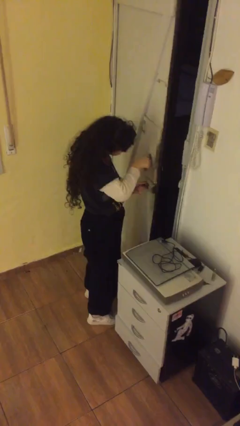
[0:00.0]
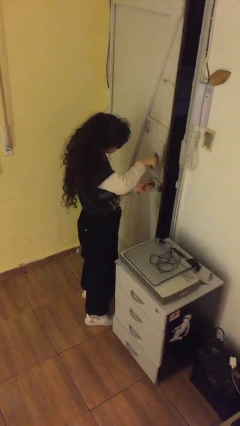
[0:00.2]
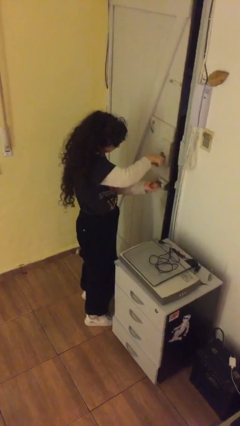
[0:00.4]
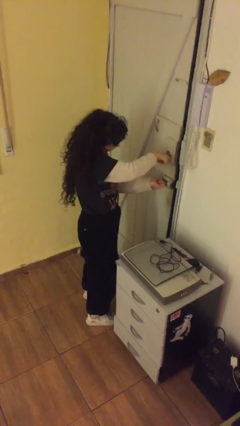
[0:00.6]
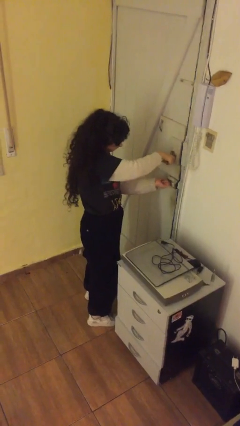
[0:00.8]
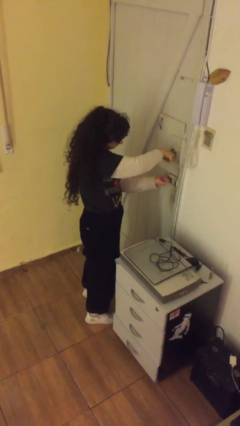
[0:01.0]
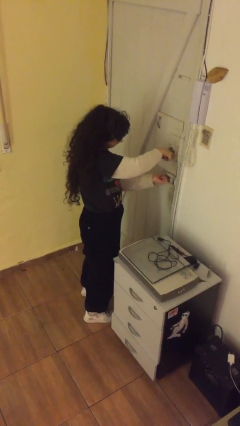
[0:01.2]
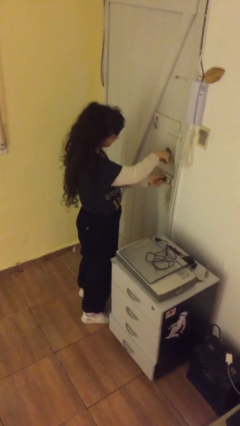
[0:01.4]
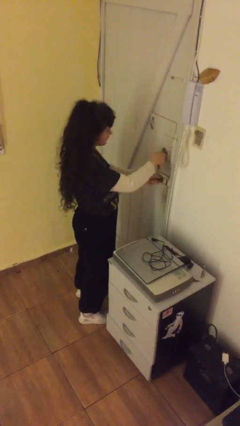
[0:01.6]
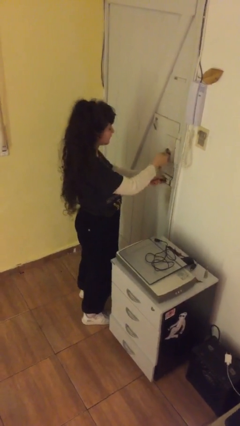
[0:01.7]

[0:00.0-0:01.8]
person closes facility door

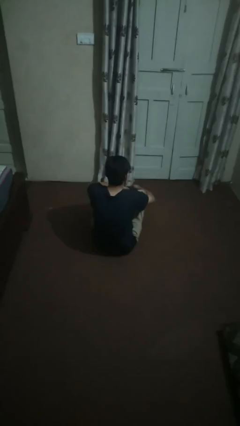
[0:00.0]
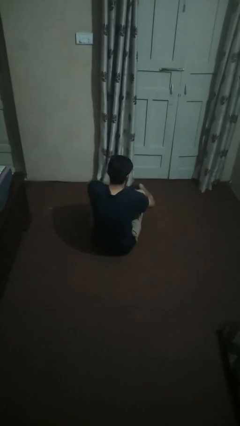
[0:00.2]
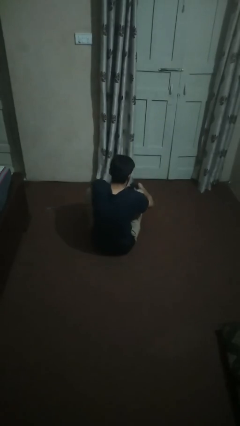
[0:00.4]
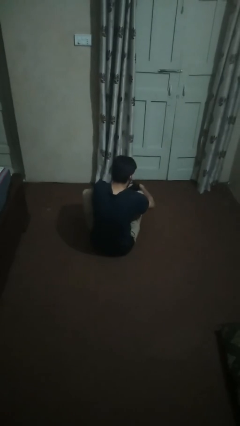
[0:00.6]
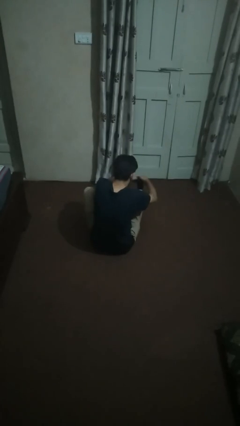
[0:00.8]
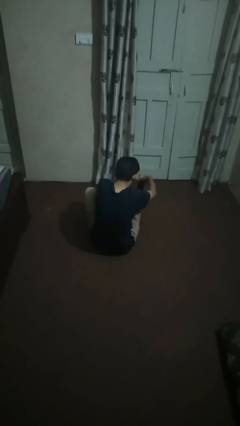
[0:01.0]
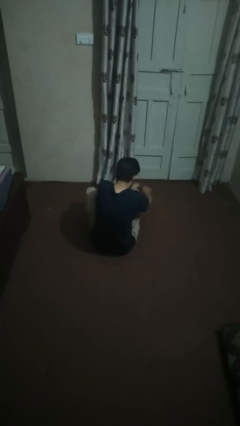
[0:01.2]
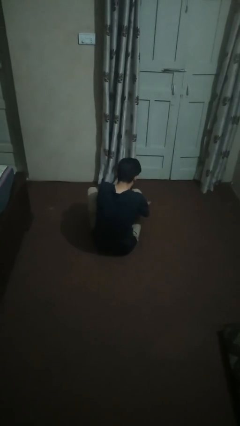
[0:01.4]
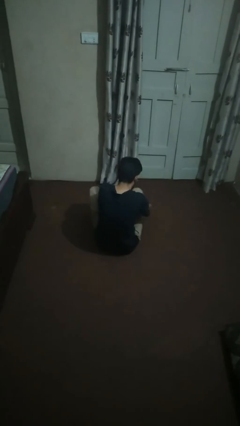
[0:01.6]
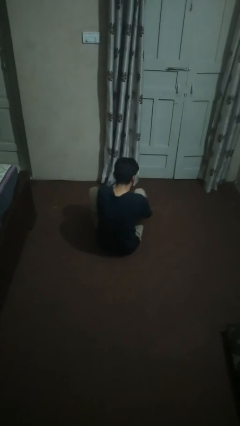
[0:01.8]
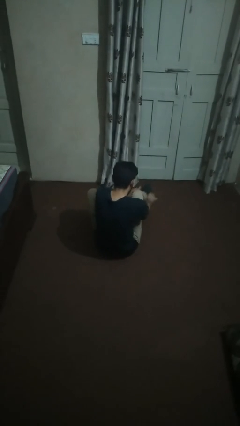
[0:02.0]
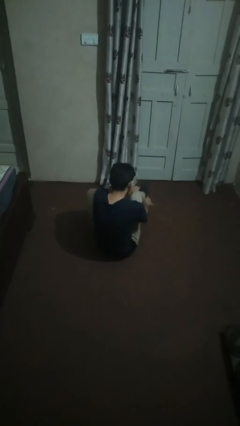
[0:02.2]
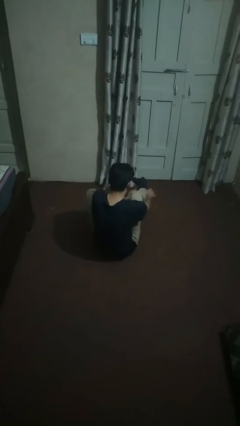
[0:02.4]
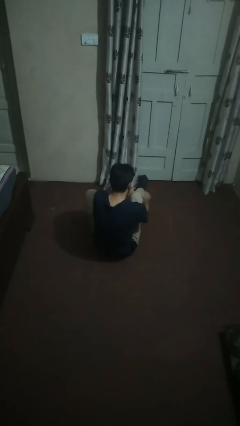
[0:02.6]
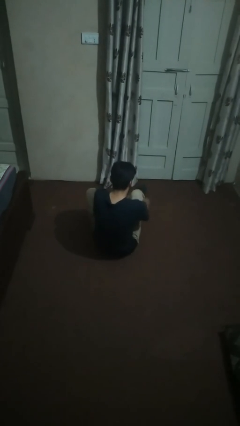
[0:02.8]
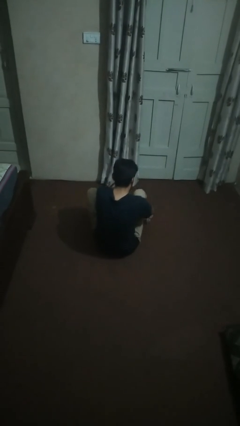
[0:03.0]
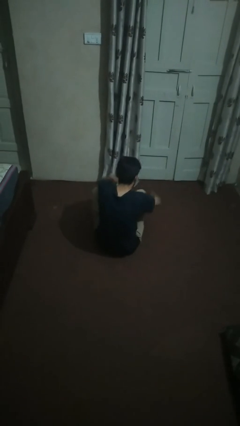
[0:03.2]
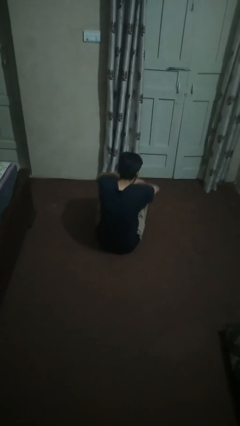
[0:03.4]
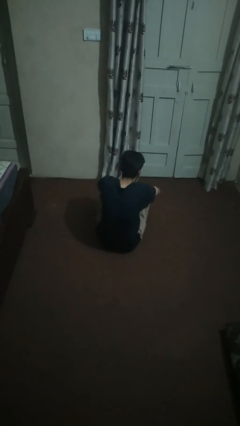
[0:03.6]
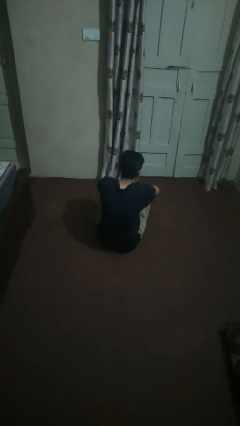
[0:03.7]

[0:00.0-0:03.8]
person puts on socks

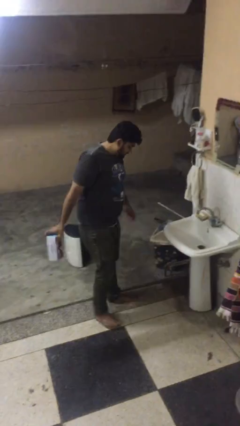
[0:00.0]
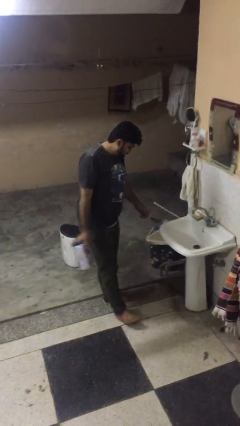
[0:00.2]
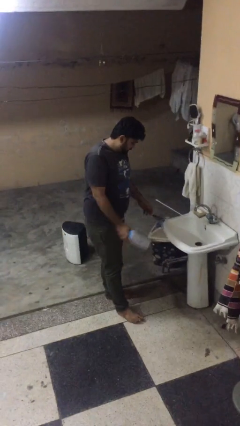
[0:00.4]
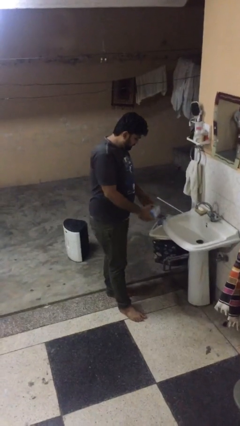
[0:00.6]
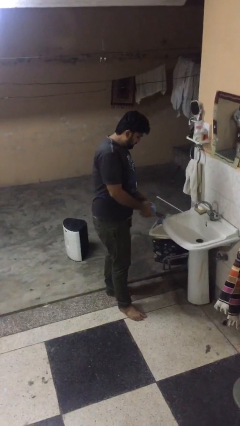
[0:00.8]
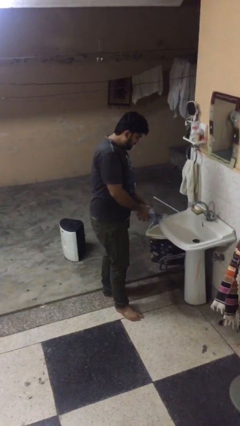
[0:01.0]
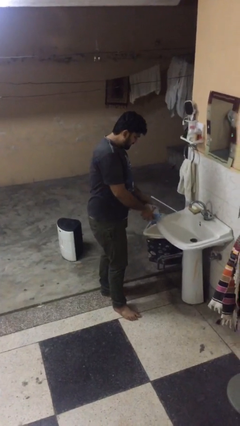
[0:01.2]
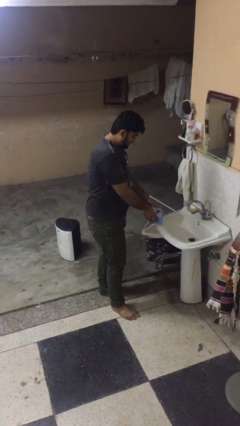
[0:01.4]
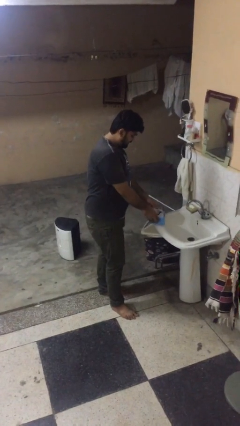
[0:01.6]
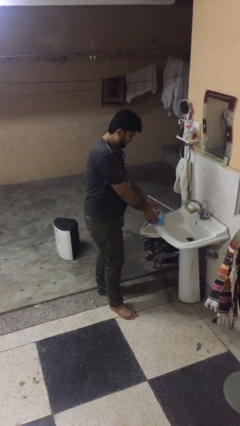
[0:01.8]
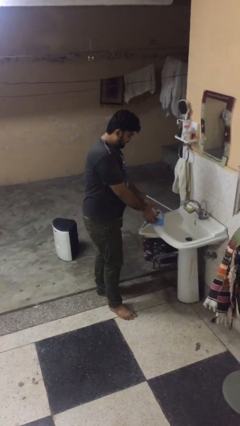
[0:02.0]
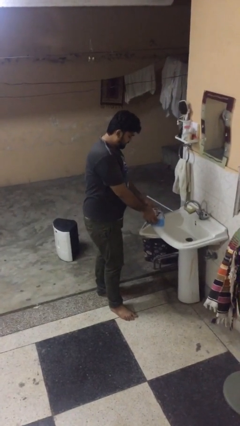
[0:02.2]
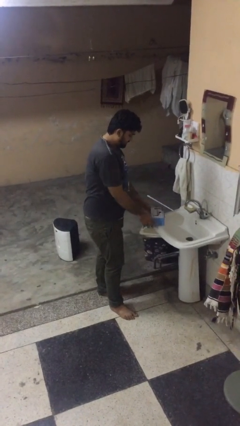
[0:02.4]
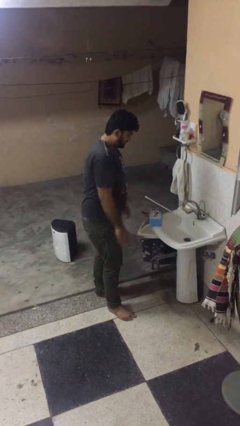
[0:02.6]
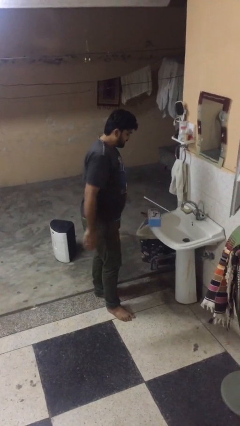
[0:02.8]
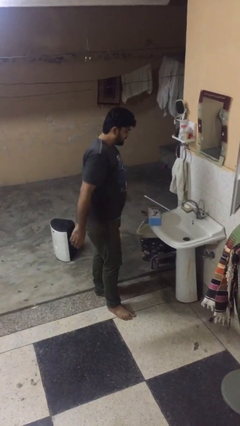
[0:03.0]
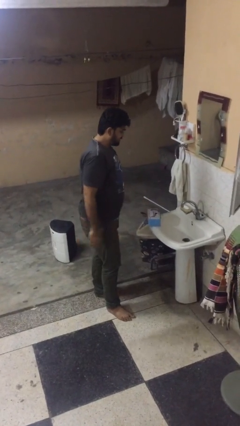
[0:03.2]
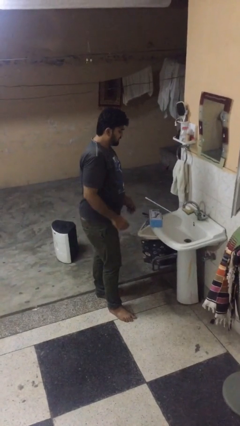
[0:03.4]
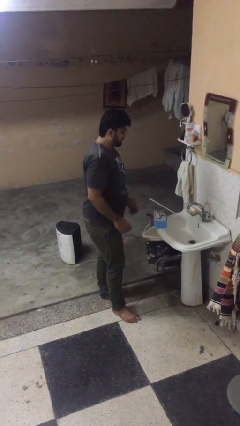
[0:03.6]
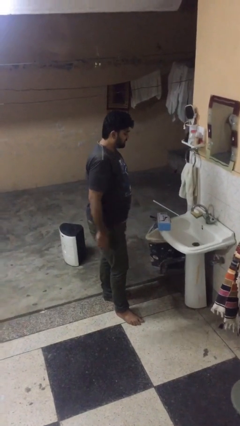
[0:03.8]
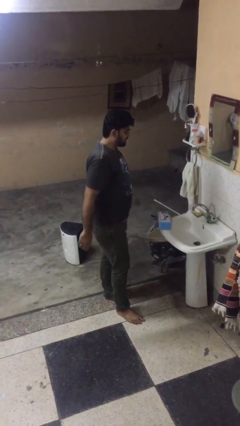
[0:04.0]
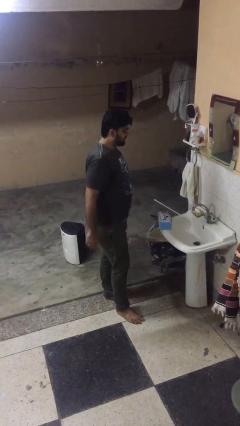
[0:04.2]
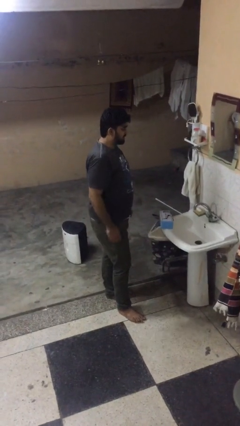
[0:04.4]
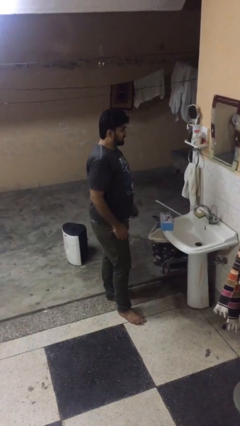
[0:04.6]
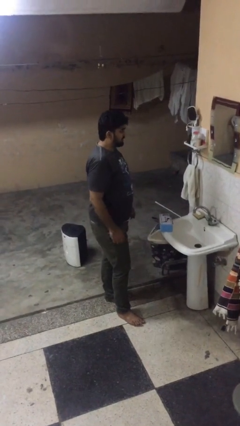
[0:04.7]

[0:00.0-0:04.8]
person puts down object on table

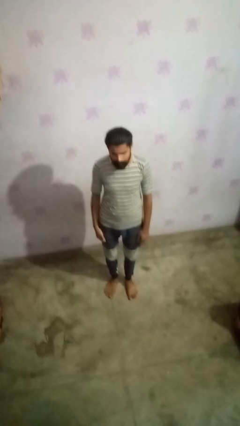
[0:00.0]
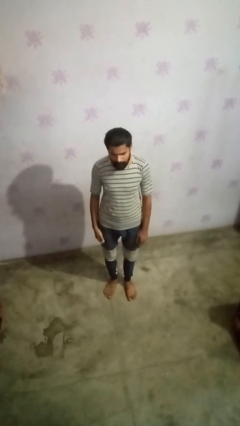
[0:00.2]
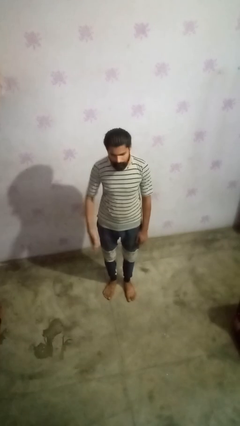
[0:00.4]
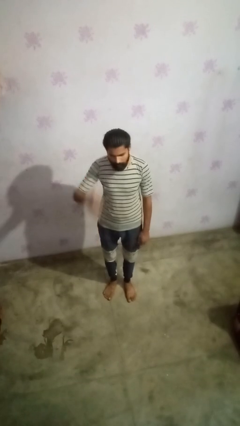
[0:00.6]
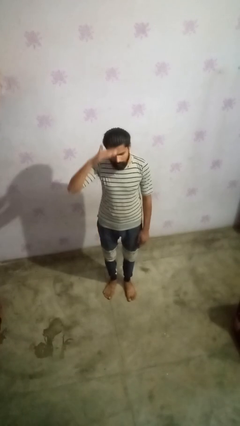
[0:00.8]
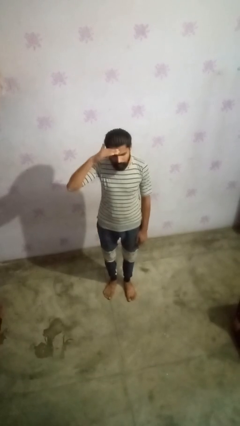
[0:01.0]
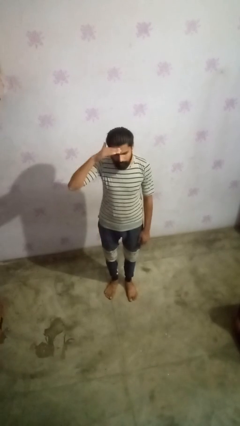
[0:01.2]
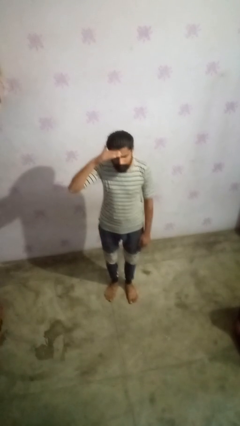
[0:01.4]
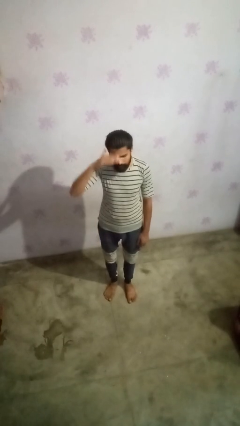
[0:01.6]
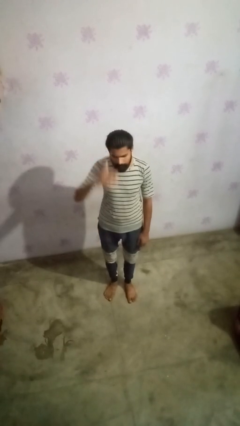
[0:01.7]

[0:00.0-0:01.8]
person salutes

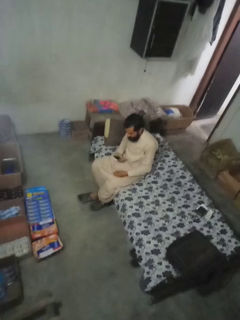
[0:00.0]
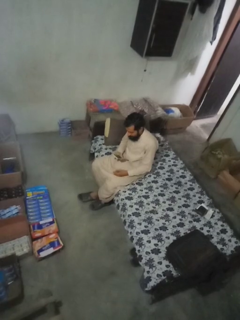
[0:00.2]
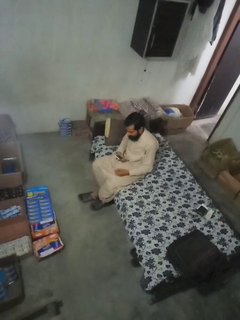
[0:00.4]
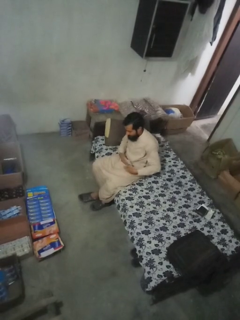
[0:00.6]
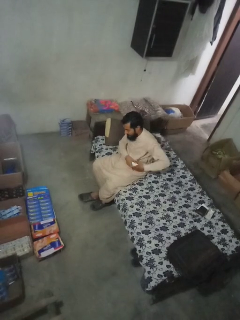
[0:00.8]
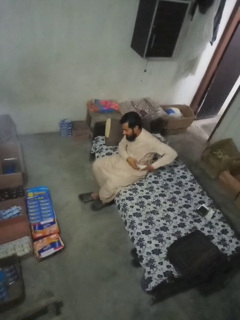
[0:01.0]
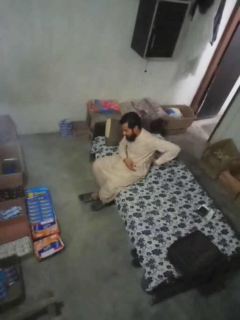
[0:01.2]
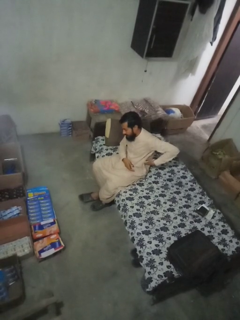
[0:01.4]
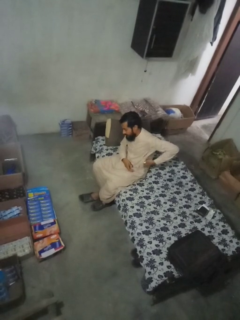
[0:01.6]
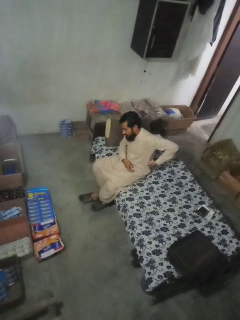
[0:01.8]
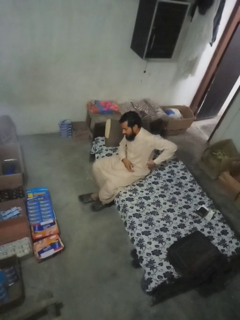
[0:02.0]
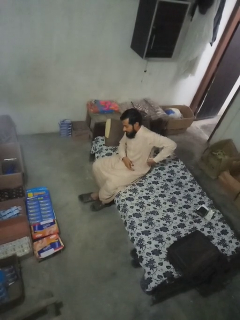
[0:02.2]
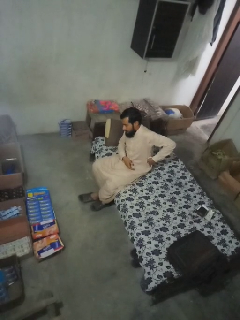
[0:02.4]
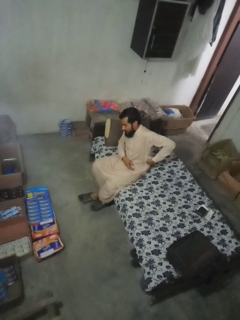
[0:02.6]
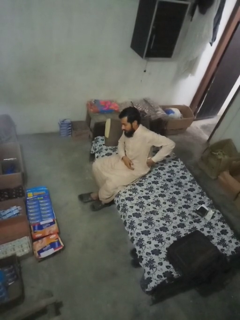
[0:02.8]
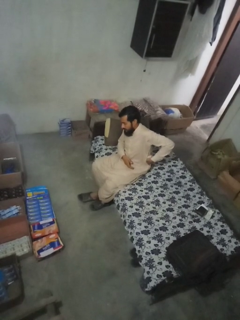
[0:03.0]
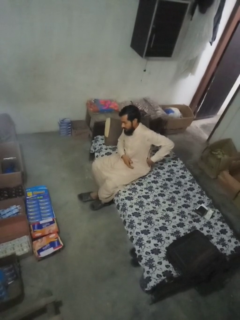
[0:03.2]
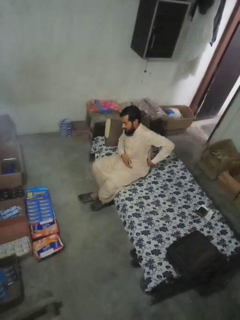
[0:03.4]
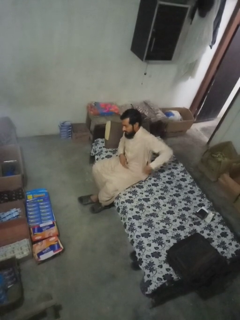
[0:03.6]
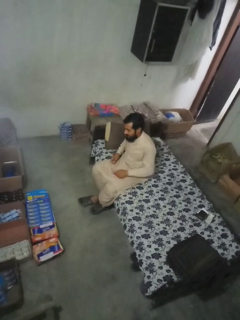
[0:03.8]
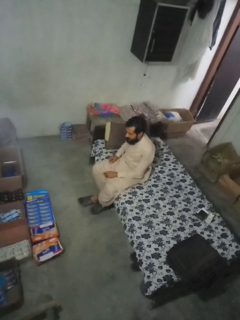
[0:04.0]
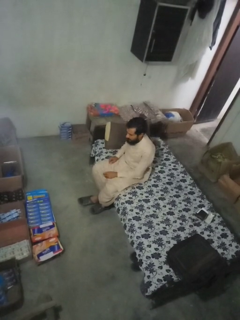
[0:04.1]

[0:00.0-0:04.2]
person puts phone into pocket

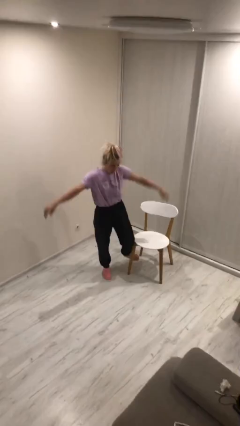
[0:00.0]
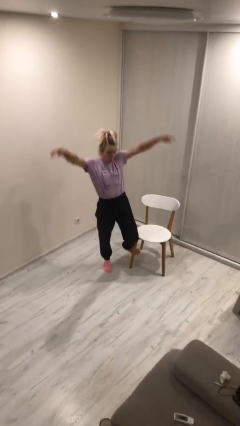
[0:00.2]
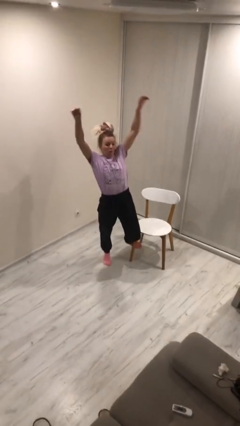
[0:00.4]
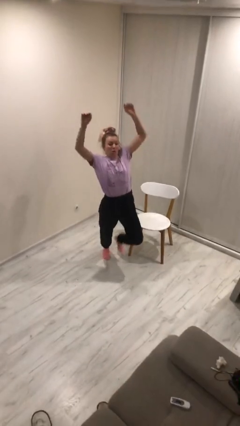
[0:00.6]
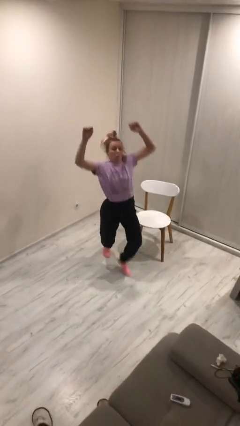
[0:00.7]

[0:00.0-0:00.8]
person trips on object on floor

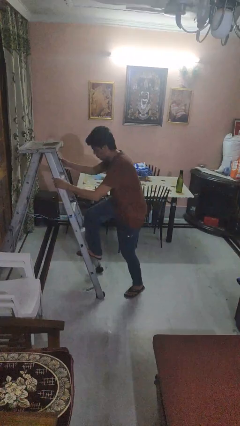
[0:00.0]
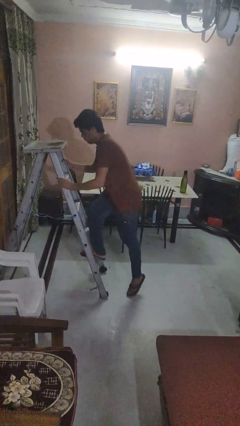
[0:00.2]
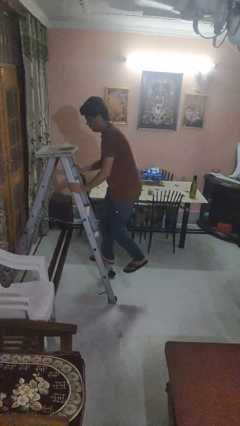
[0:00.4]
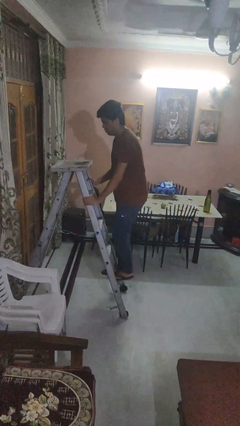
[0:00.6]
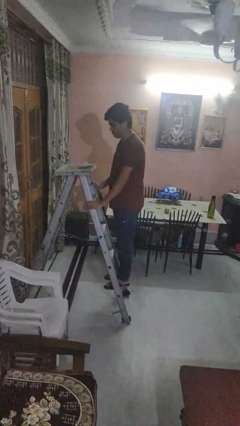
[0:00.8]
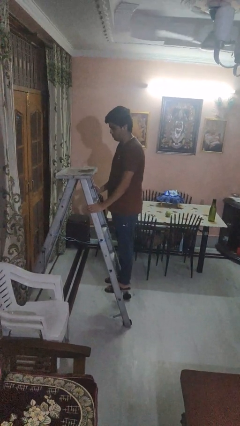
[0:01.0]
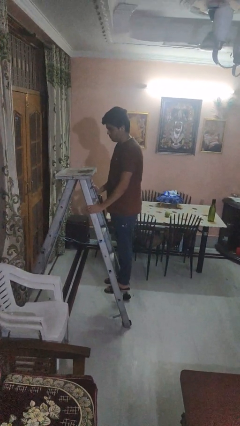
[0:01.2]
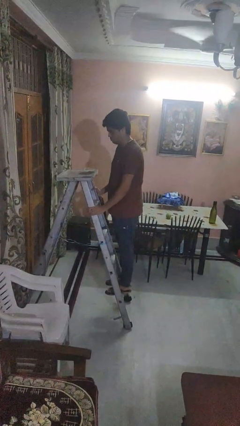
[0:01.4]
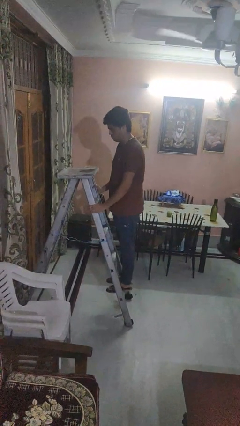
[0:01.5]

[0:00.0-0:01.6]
person climbs up ladder
